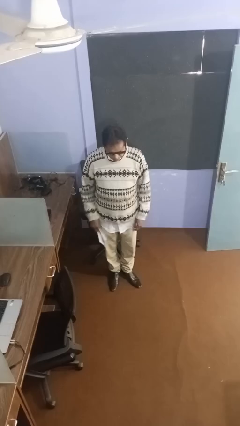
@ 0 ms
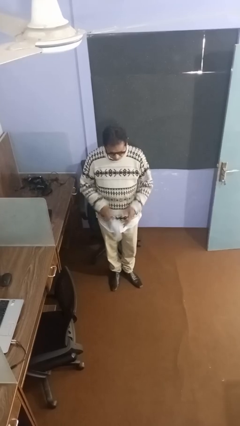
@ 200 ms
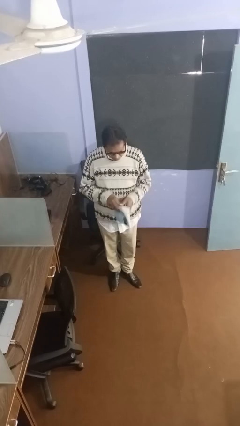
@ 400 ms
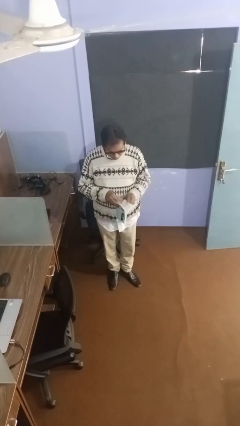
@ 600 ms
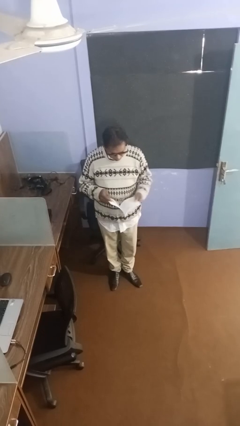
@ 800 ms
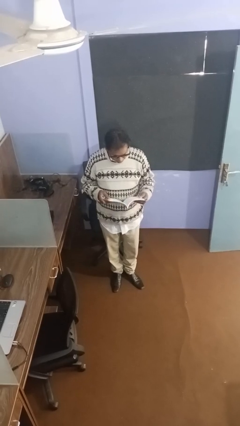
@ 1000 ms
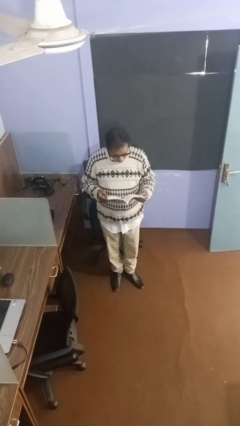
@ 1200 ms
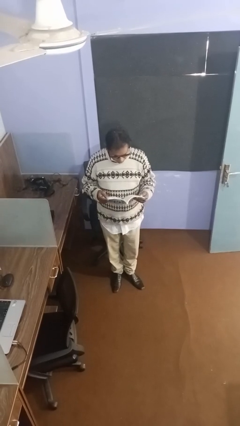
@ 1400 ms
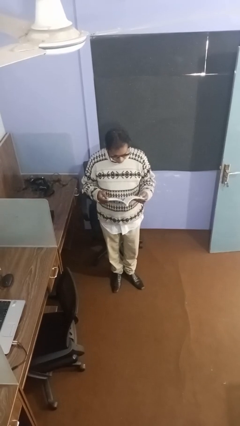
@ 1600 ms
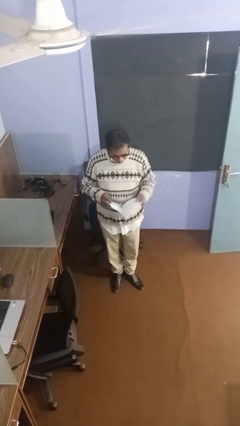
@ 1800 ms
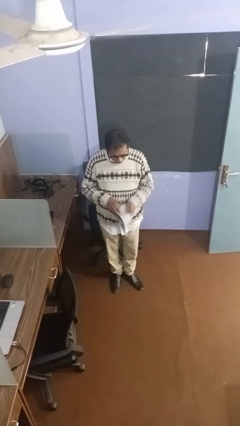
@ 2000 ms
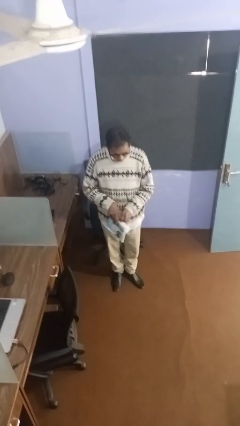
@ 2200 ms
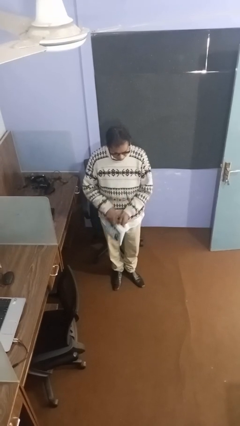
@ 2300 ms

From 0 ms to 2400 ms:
person reads document

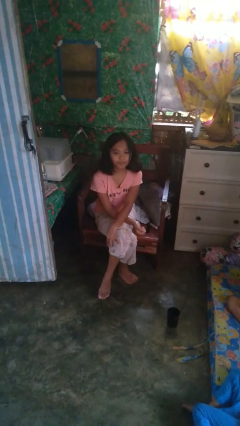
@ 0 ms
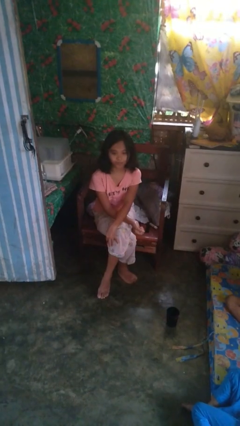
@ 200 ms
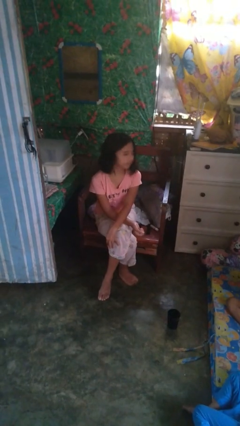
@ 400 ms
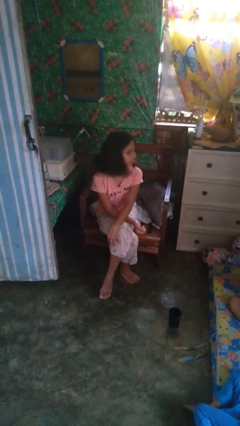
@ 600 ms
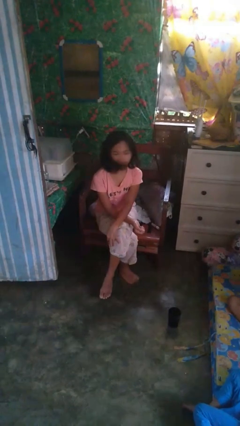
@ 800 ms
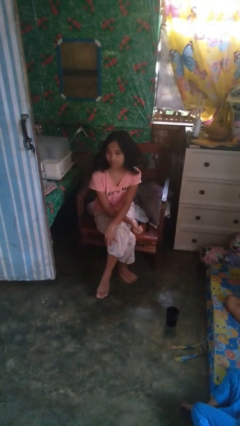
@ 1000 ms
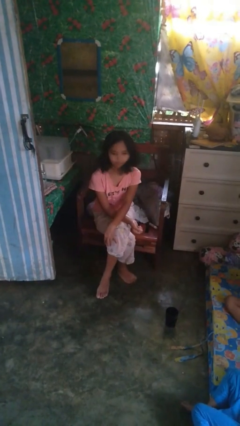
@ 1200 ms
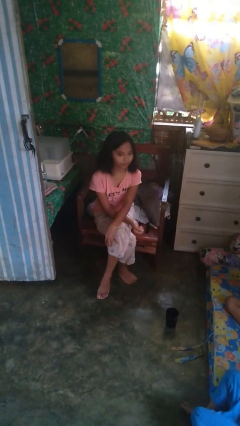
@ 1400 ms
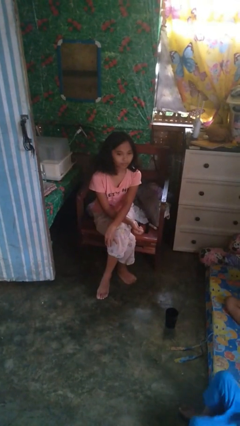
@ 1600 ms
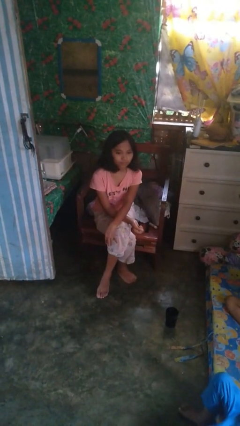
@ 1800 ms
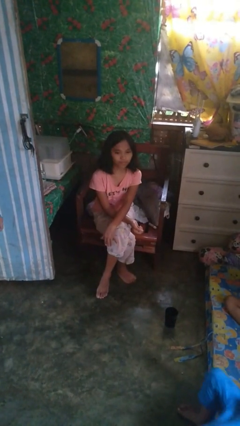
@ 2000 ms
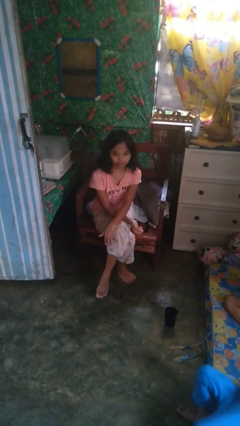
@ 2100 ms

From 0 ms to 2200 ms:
person shakes head

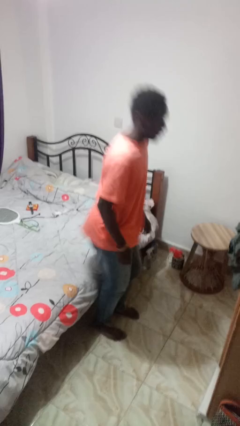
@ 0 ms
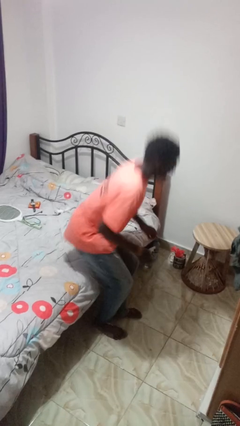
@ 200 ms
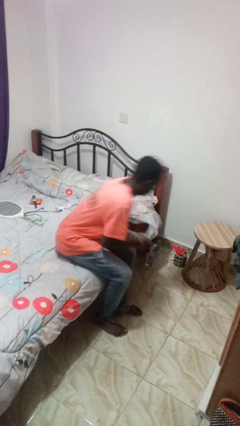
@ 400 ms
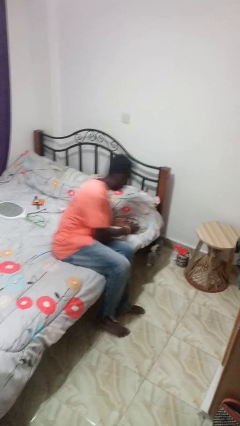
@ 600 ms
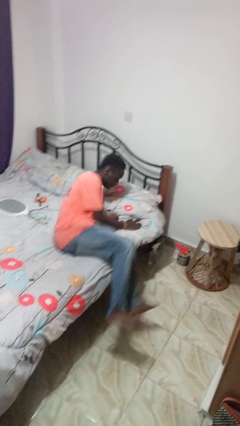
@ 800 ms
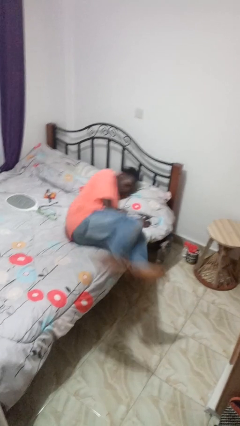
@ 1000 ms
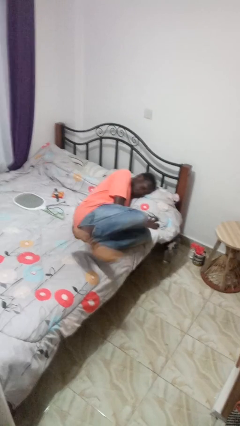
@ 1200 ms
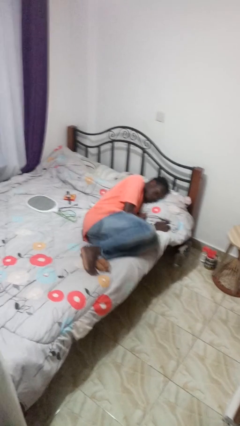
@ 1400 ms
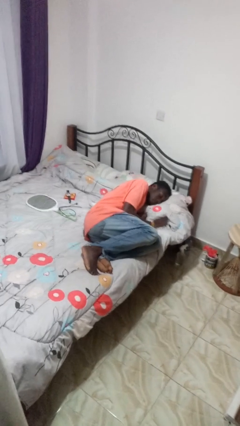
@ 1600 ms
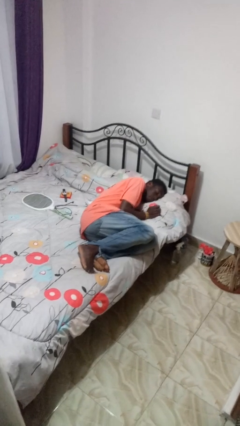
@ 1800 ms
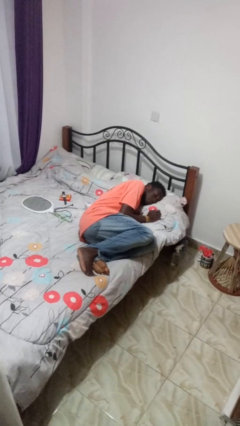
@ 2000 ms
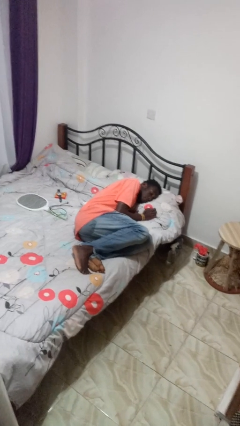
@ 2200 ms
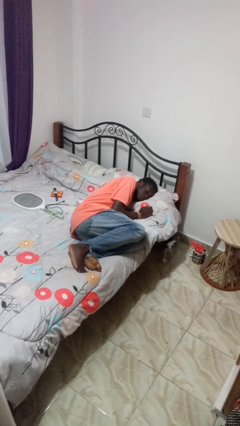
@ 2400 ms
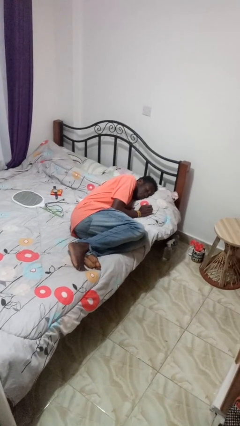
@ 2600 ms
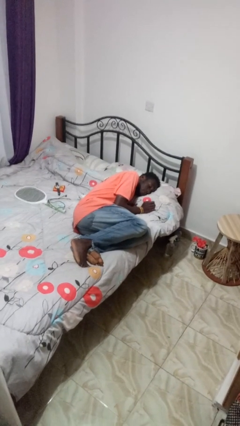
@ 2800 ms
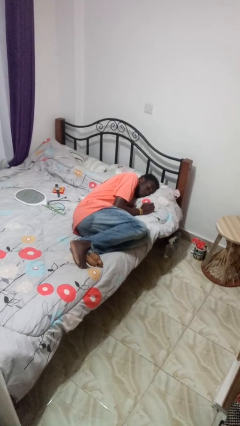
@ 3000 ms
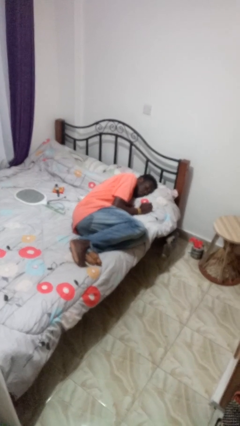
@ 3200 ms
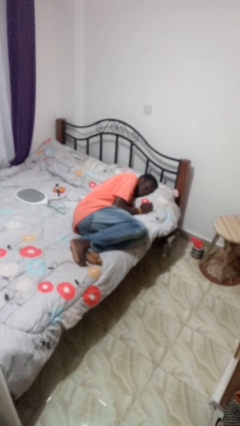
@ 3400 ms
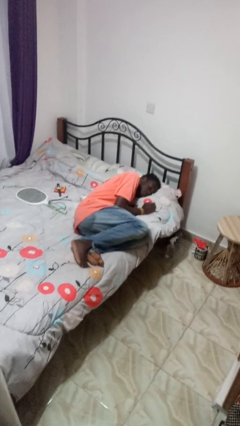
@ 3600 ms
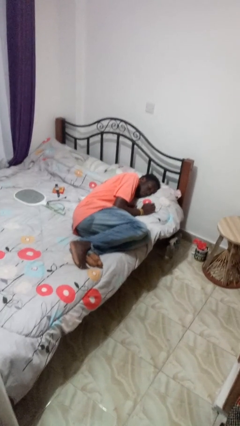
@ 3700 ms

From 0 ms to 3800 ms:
person lies down on bed

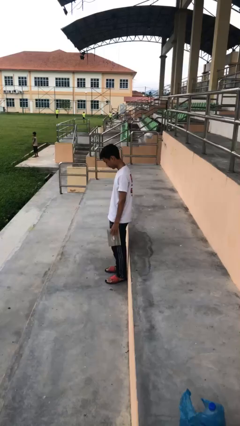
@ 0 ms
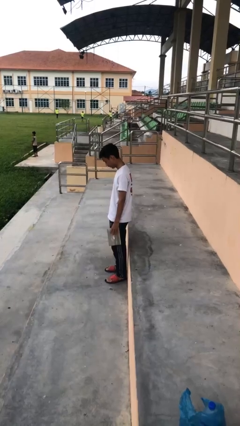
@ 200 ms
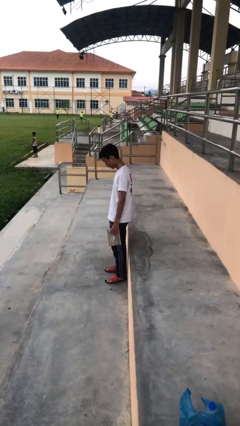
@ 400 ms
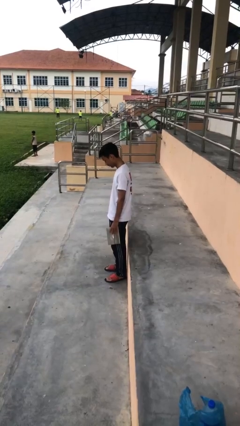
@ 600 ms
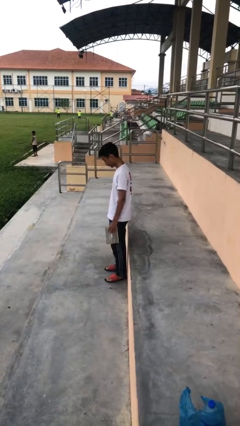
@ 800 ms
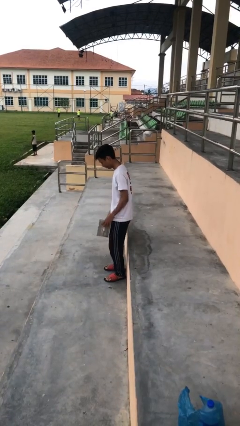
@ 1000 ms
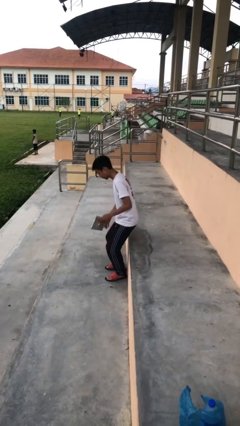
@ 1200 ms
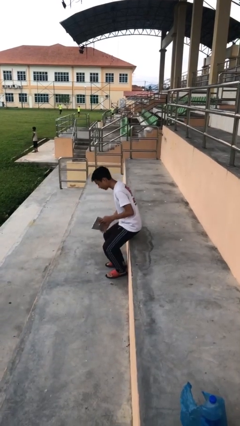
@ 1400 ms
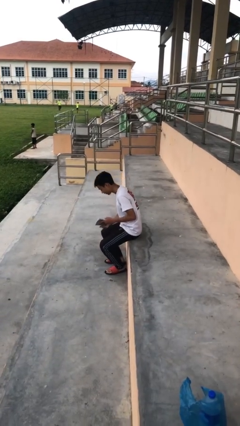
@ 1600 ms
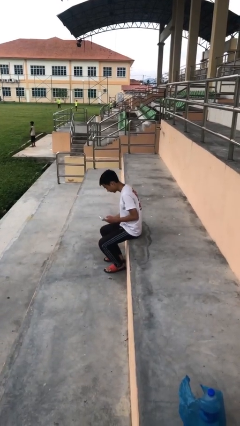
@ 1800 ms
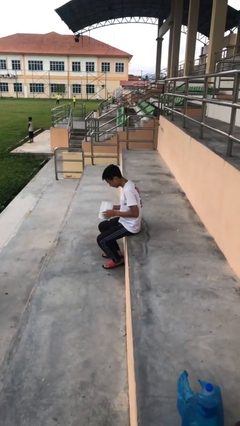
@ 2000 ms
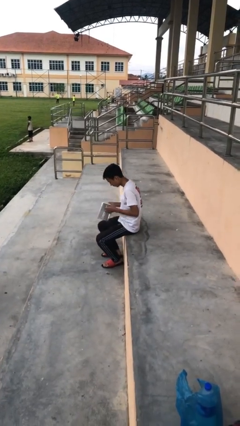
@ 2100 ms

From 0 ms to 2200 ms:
person sits down

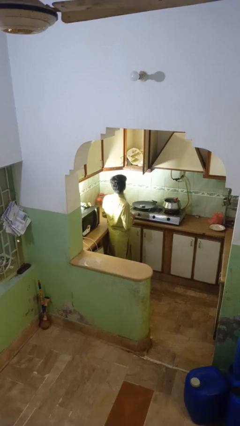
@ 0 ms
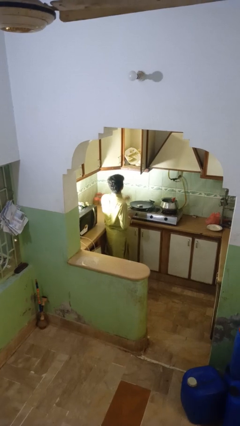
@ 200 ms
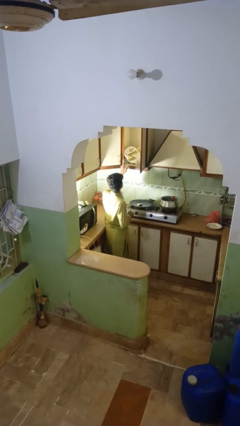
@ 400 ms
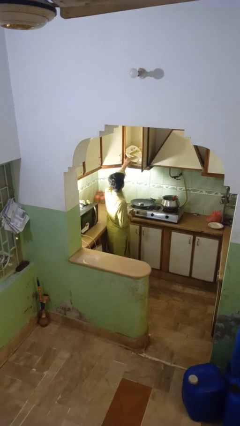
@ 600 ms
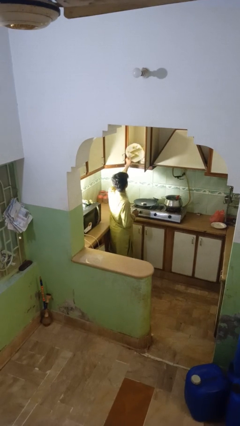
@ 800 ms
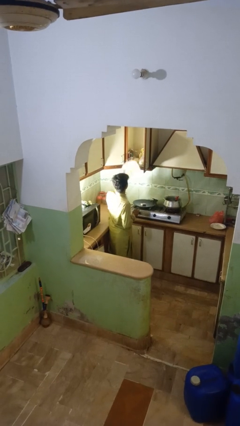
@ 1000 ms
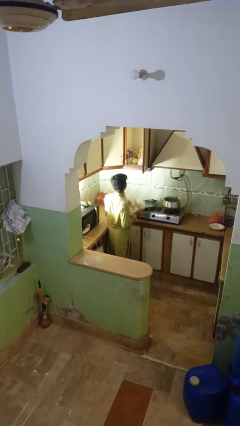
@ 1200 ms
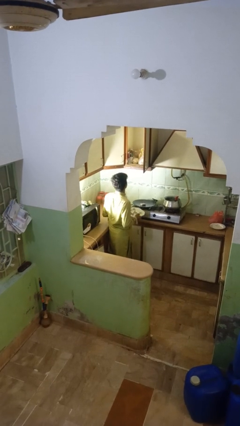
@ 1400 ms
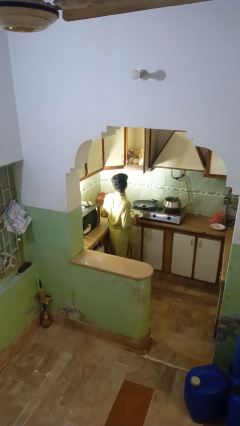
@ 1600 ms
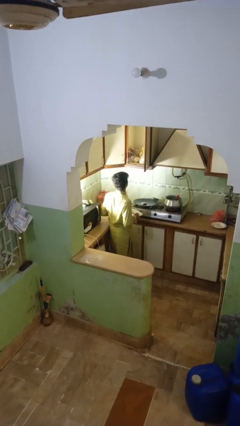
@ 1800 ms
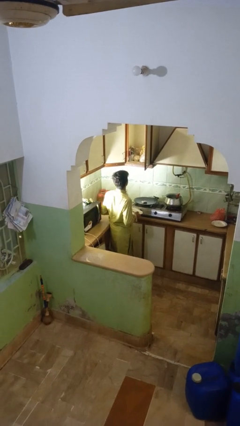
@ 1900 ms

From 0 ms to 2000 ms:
person takes object from cabinet

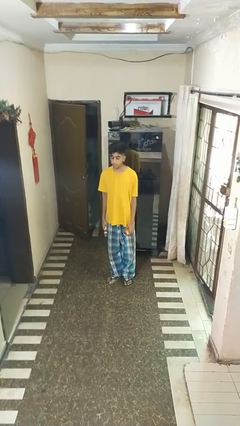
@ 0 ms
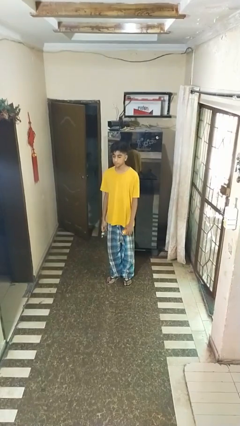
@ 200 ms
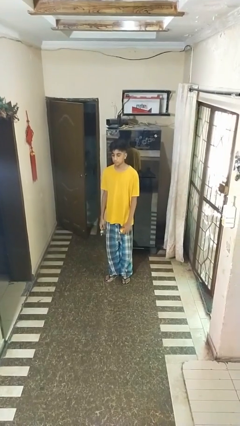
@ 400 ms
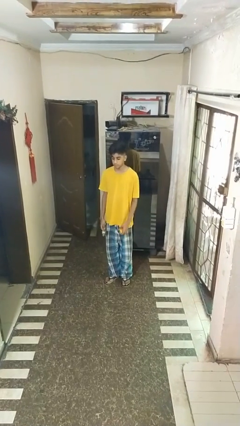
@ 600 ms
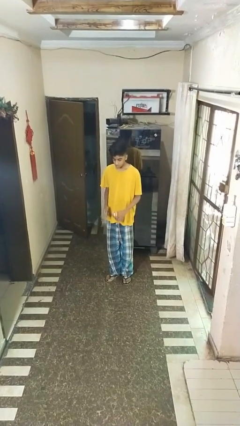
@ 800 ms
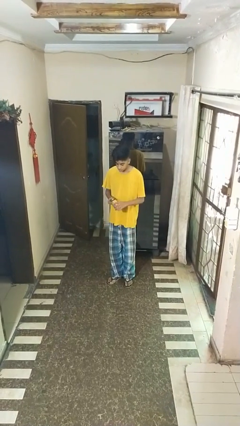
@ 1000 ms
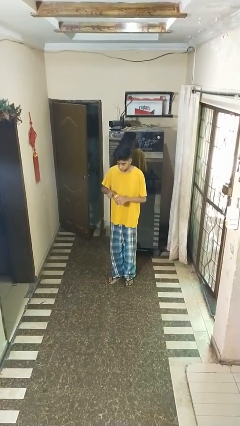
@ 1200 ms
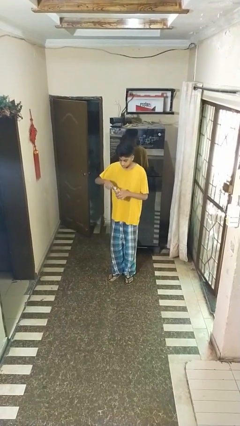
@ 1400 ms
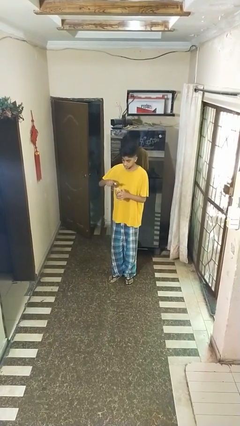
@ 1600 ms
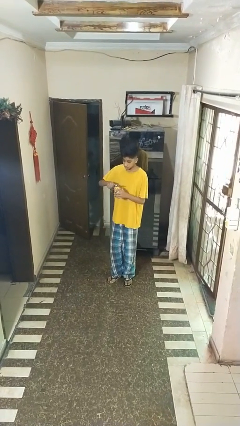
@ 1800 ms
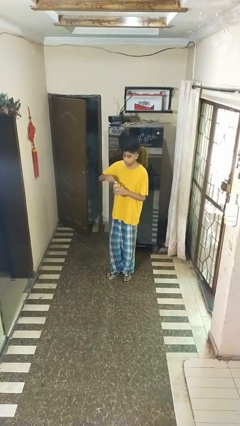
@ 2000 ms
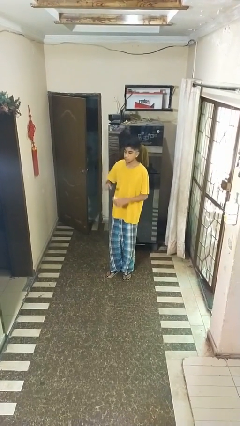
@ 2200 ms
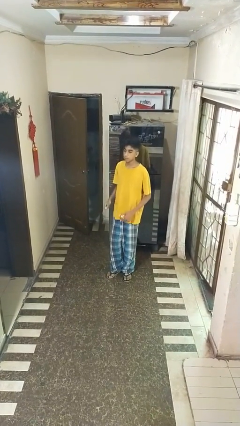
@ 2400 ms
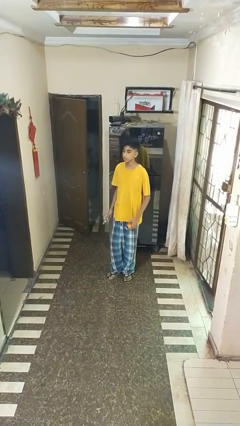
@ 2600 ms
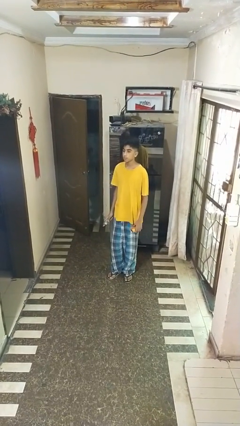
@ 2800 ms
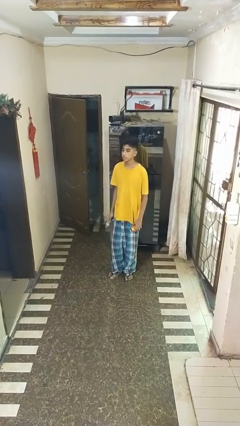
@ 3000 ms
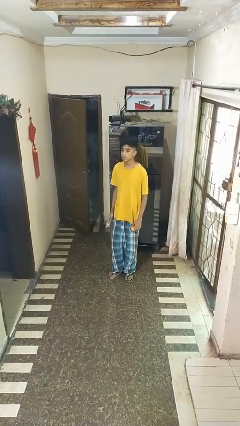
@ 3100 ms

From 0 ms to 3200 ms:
person opens can with can opener

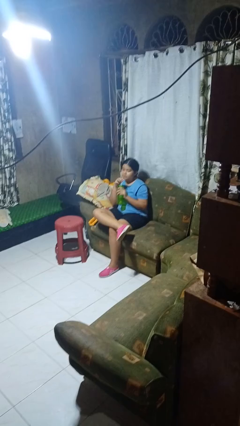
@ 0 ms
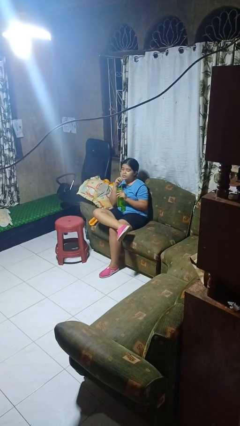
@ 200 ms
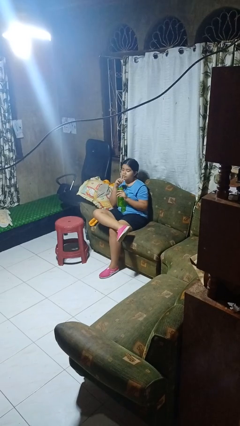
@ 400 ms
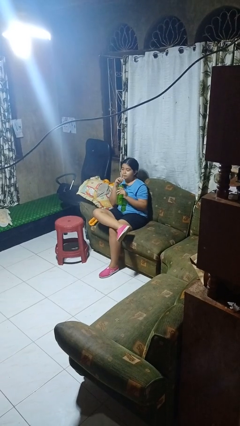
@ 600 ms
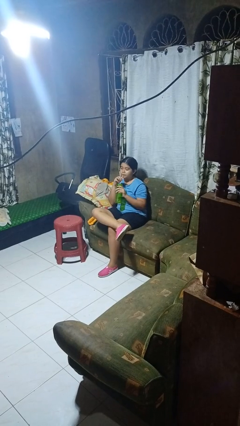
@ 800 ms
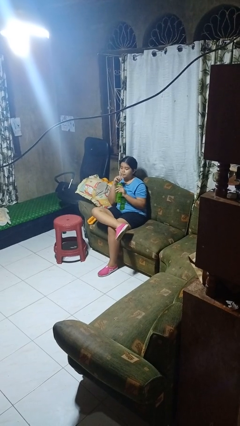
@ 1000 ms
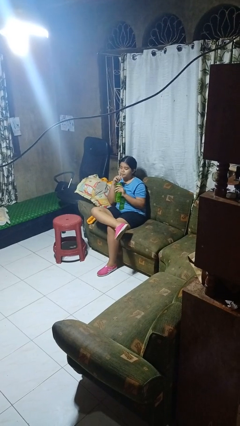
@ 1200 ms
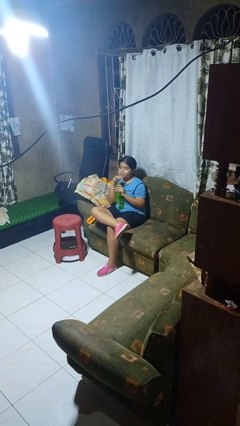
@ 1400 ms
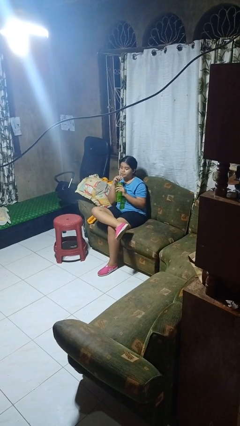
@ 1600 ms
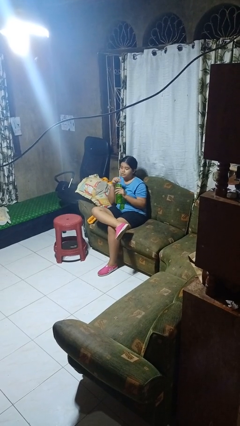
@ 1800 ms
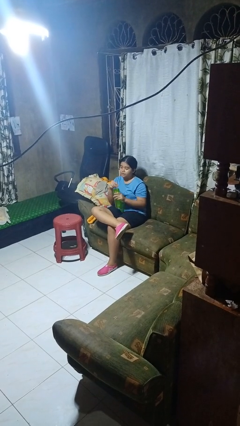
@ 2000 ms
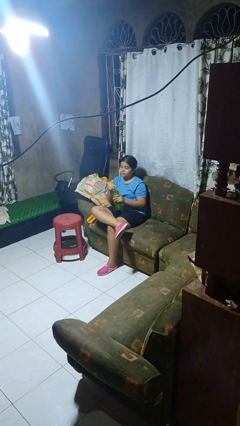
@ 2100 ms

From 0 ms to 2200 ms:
person drinks from straw
